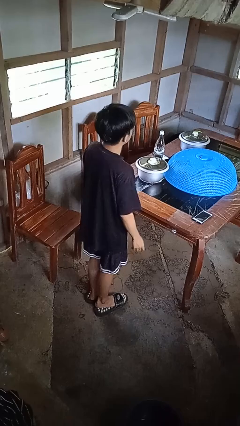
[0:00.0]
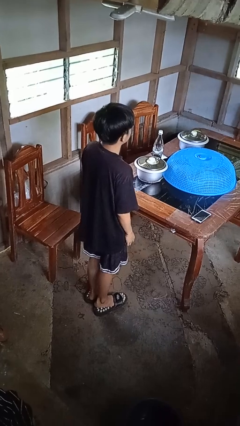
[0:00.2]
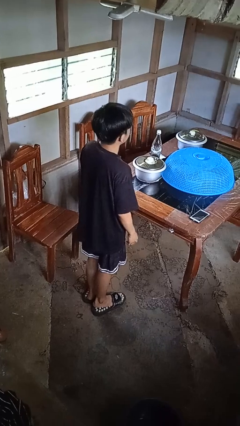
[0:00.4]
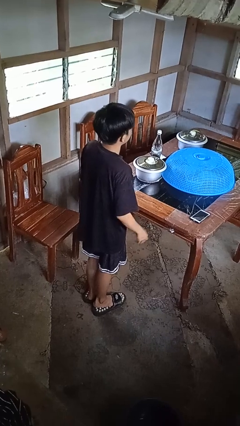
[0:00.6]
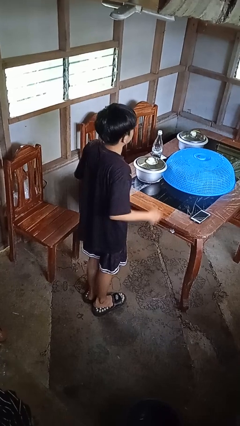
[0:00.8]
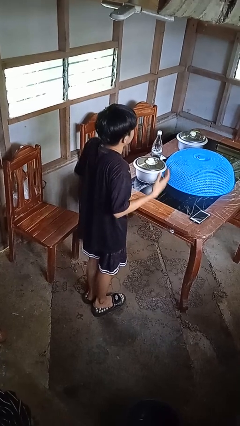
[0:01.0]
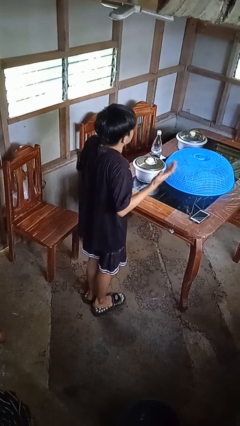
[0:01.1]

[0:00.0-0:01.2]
person shrugs

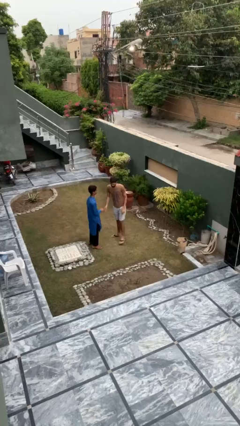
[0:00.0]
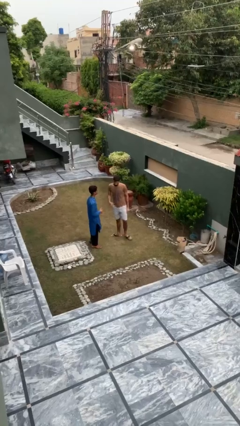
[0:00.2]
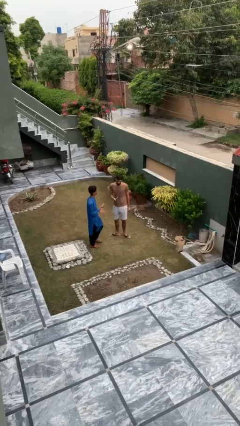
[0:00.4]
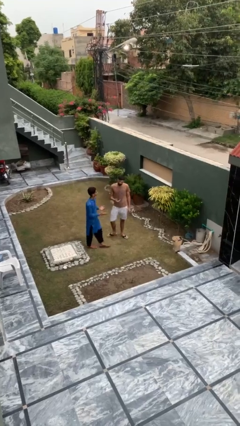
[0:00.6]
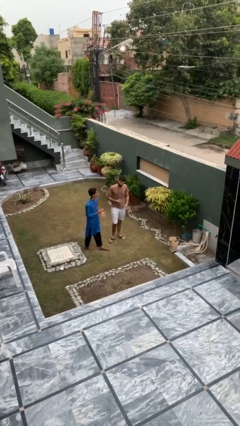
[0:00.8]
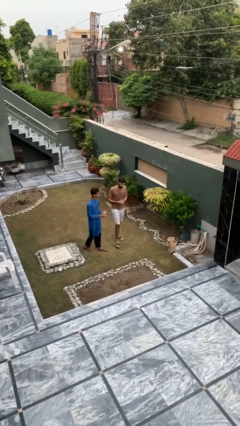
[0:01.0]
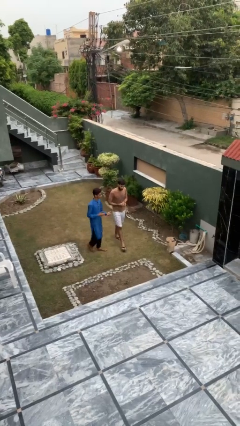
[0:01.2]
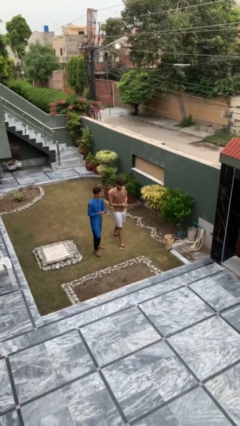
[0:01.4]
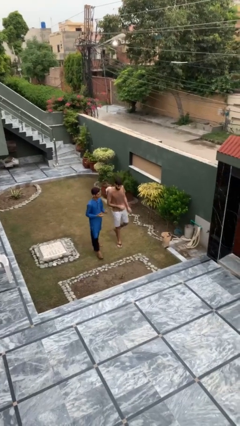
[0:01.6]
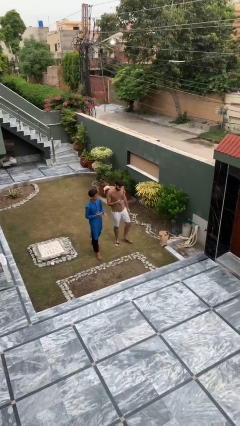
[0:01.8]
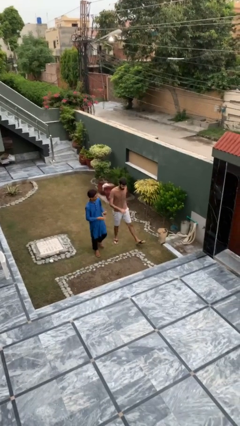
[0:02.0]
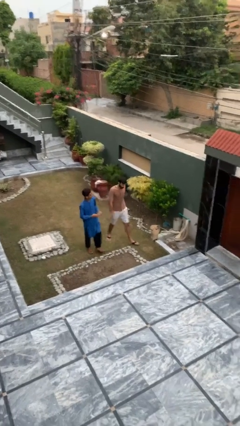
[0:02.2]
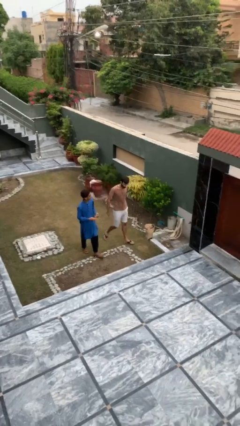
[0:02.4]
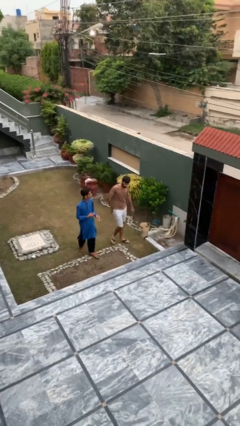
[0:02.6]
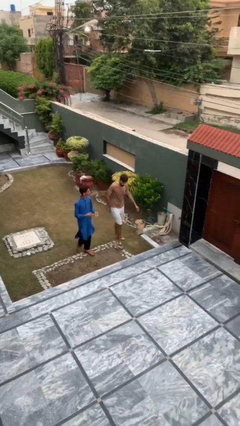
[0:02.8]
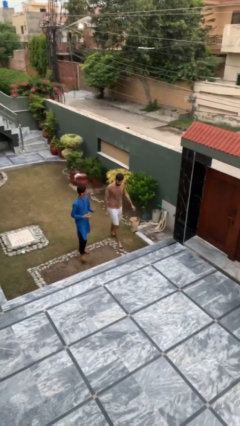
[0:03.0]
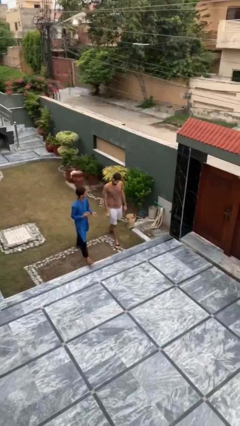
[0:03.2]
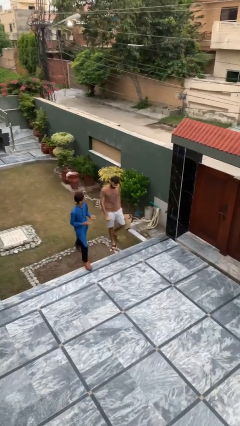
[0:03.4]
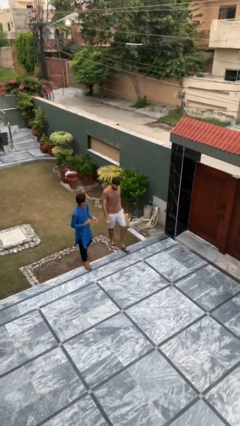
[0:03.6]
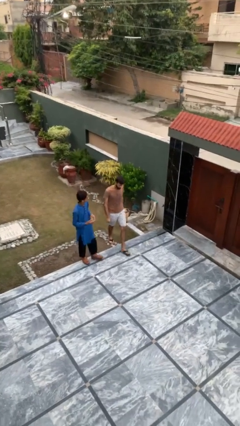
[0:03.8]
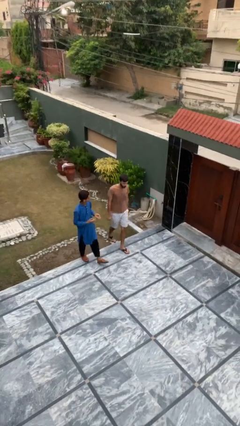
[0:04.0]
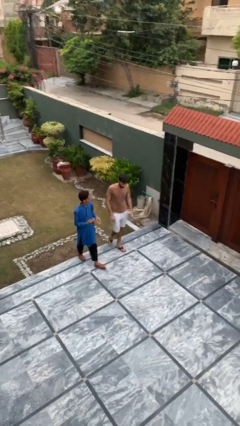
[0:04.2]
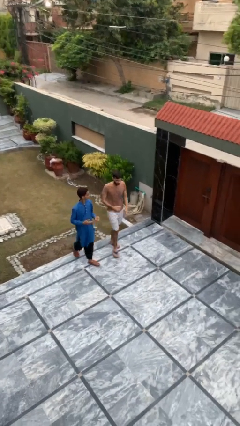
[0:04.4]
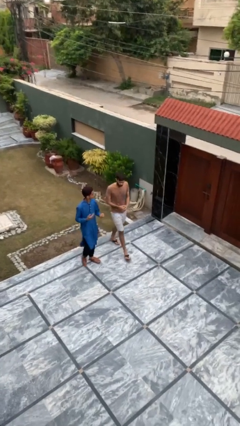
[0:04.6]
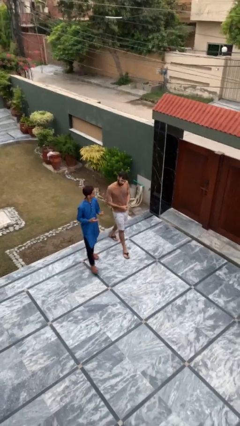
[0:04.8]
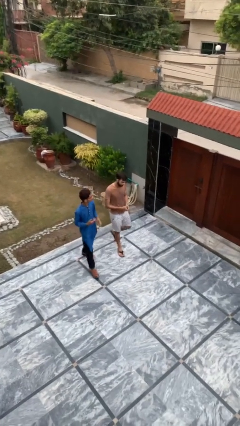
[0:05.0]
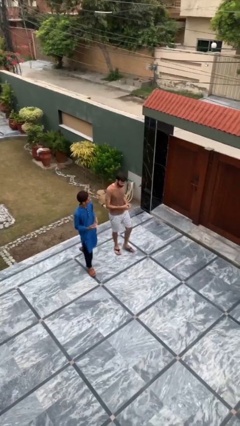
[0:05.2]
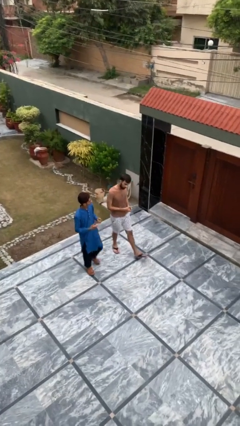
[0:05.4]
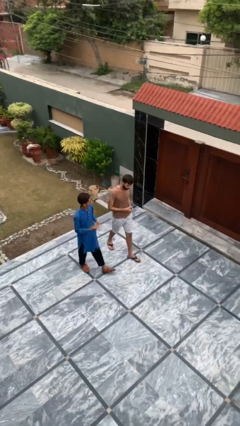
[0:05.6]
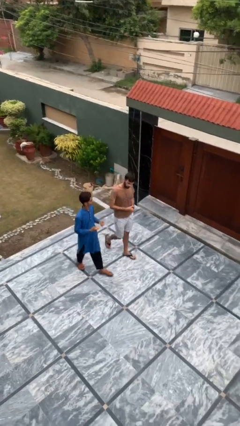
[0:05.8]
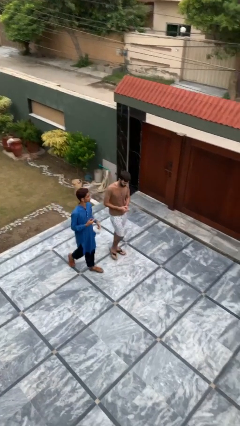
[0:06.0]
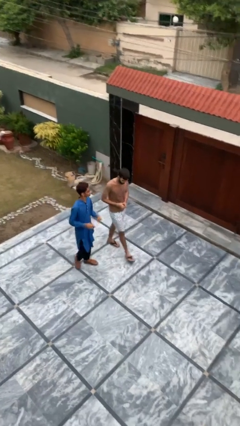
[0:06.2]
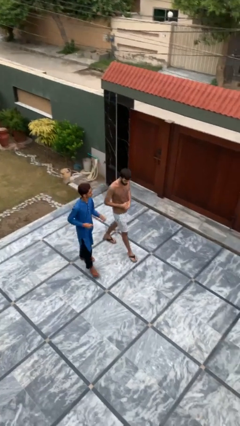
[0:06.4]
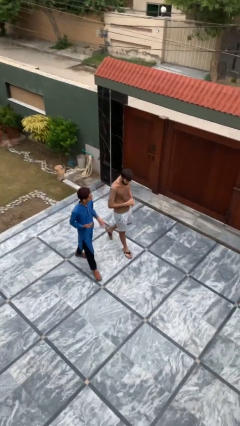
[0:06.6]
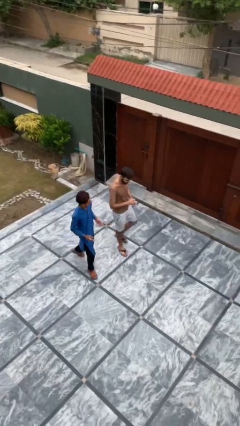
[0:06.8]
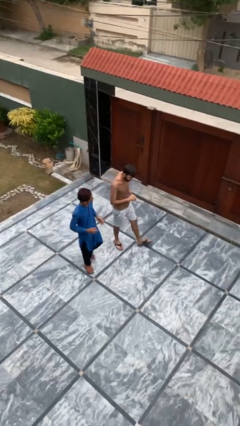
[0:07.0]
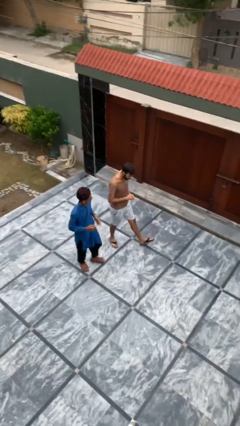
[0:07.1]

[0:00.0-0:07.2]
person talks to person

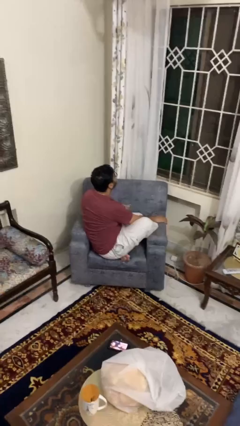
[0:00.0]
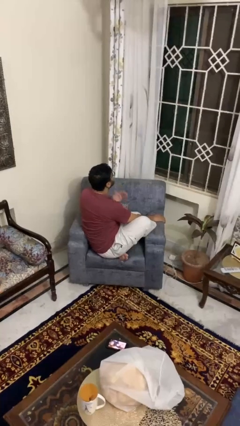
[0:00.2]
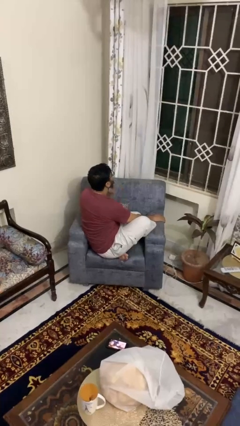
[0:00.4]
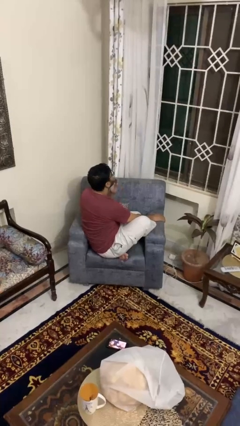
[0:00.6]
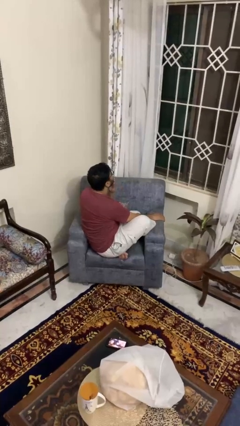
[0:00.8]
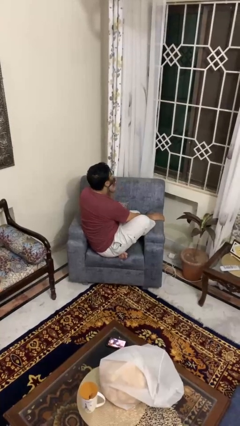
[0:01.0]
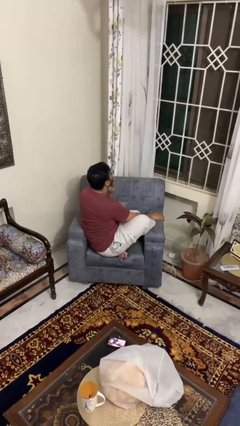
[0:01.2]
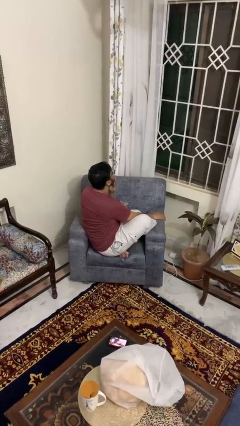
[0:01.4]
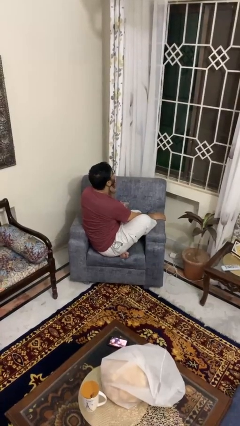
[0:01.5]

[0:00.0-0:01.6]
person strokes chin

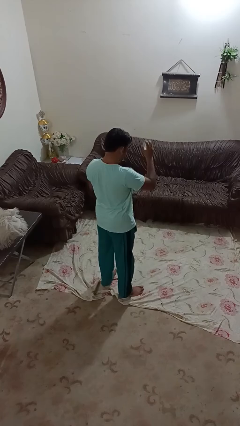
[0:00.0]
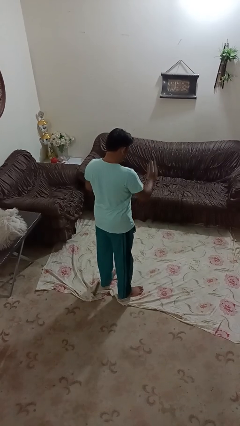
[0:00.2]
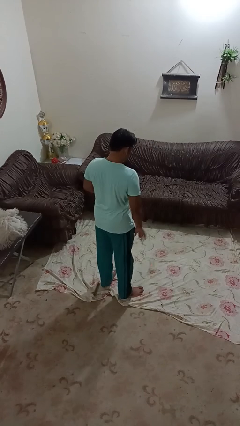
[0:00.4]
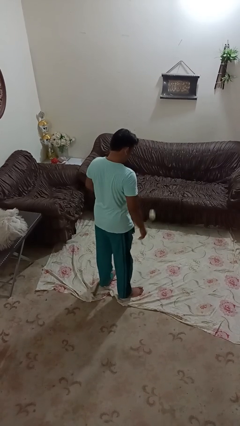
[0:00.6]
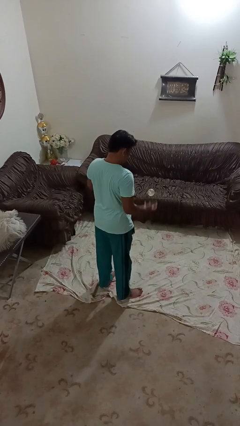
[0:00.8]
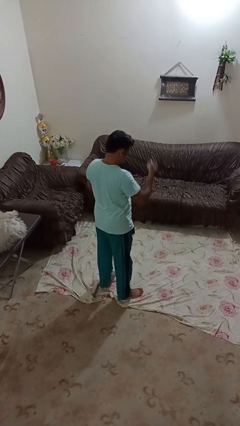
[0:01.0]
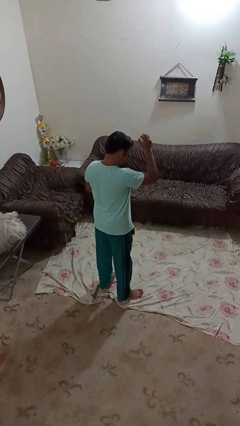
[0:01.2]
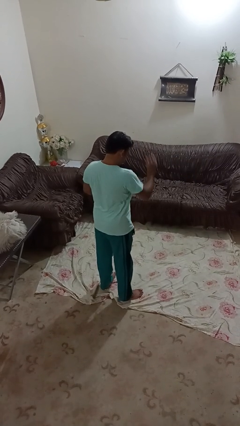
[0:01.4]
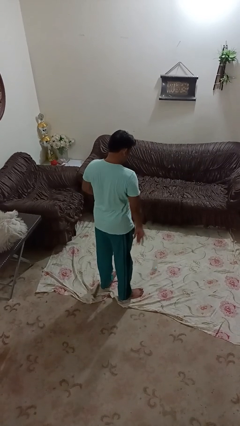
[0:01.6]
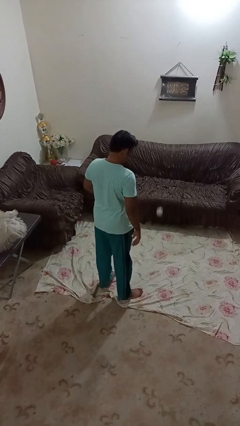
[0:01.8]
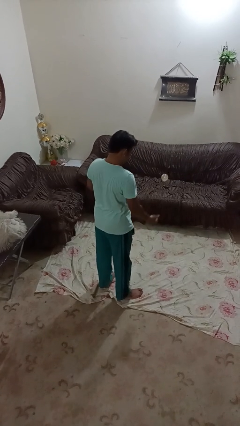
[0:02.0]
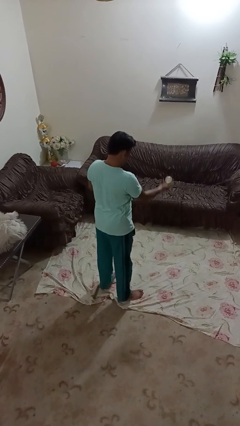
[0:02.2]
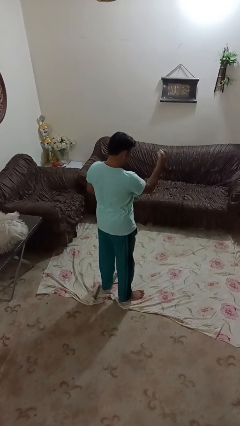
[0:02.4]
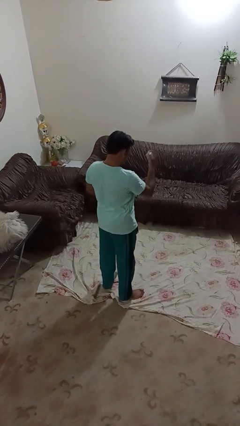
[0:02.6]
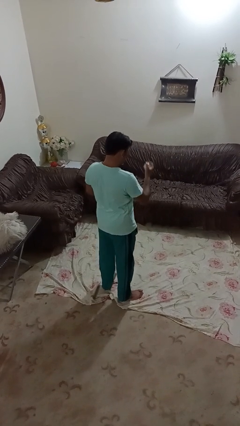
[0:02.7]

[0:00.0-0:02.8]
person bounces ball on floor

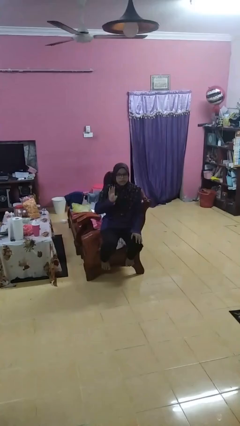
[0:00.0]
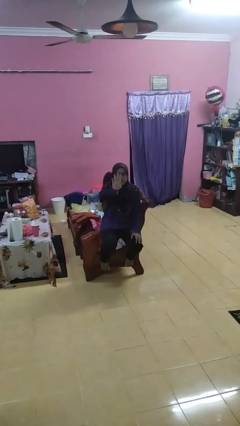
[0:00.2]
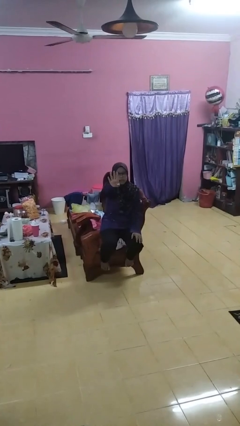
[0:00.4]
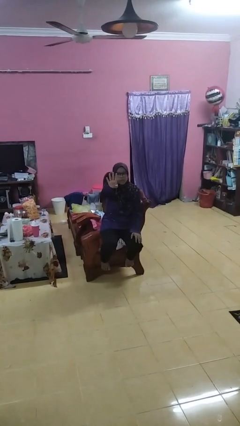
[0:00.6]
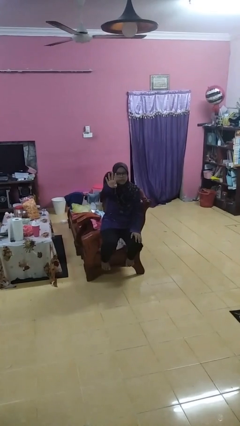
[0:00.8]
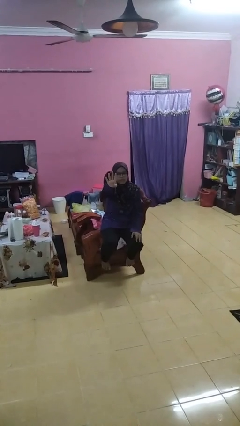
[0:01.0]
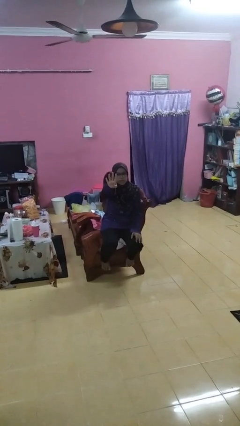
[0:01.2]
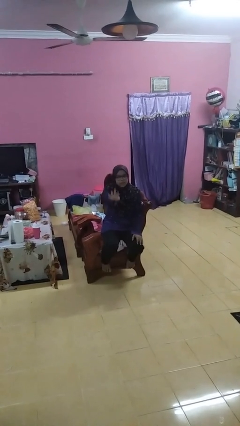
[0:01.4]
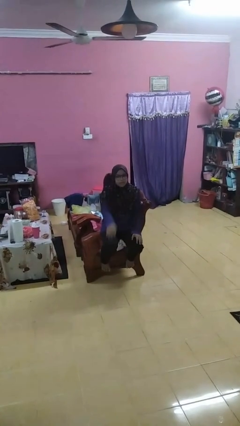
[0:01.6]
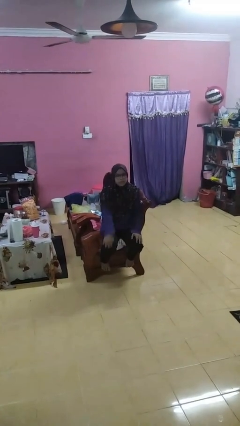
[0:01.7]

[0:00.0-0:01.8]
person gestures number four

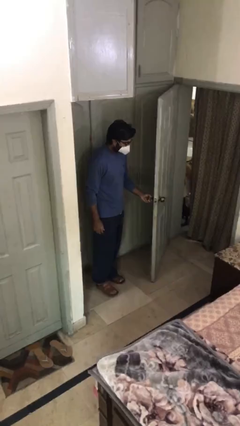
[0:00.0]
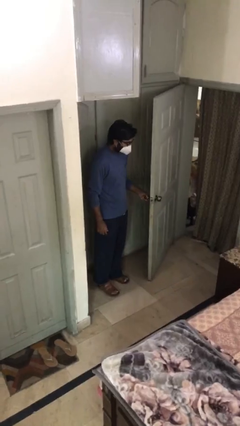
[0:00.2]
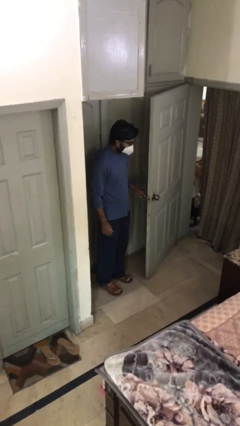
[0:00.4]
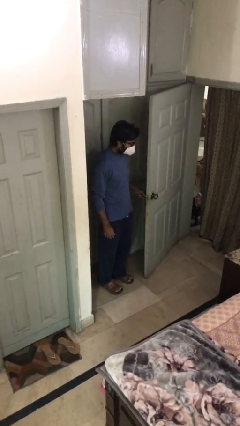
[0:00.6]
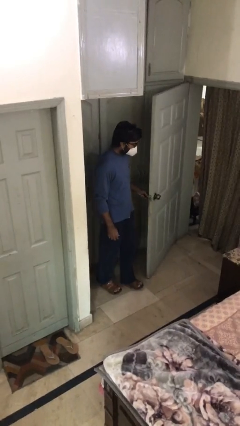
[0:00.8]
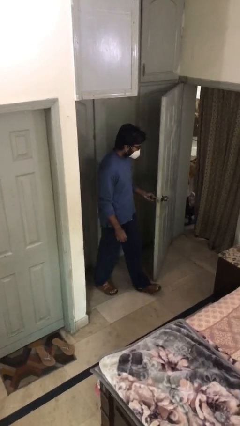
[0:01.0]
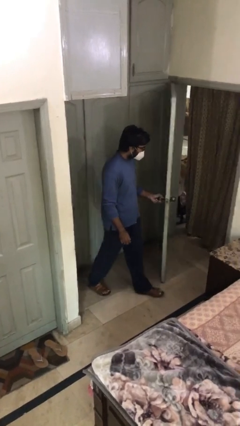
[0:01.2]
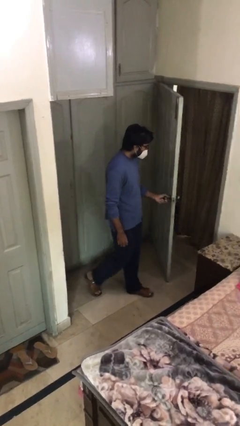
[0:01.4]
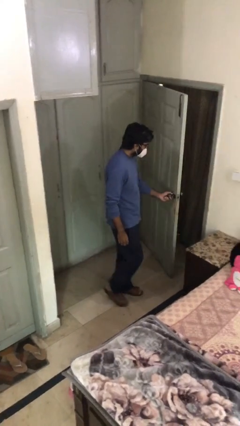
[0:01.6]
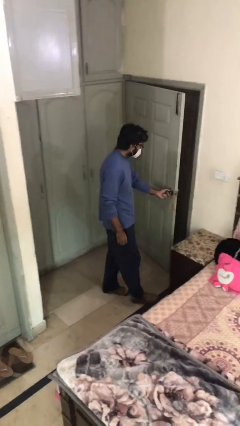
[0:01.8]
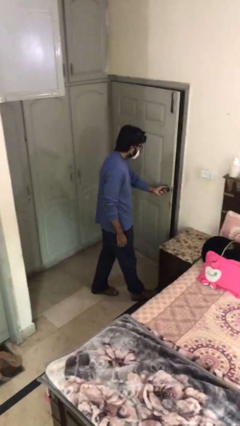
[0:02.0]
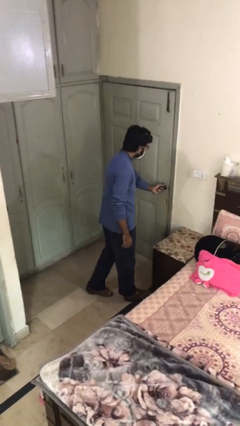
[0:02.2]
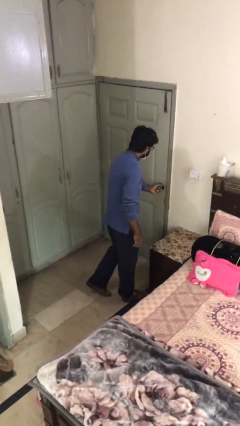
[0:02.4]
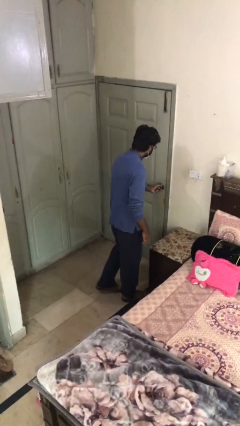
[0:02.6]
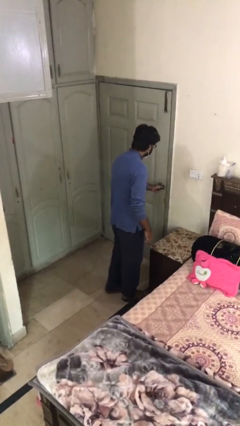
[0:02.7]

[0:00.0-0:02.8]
person closes facility door
